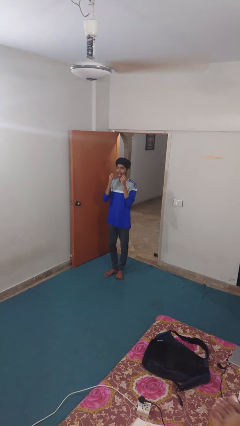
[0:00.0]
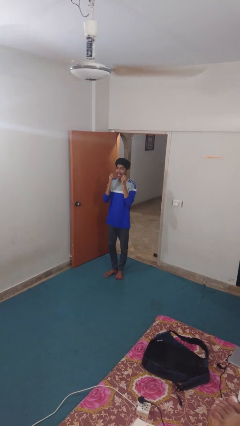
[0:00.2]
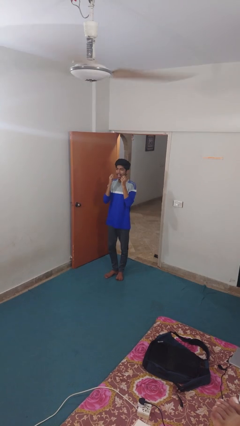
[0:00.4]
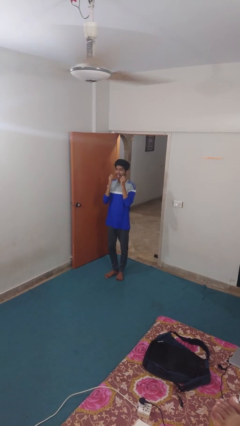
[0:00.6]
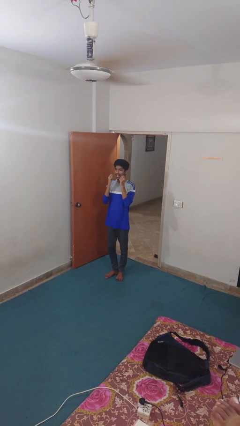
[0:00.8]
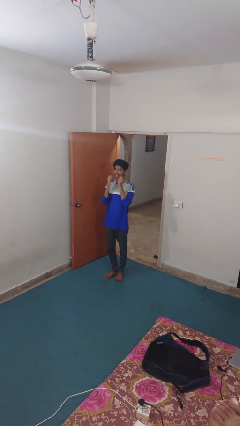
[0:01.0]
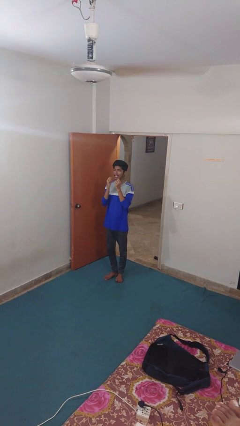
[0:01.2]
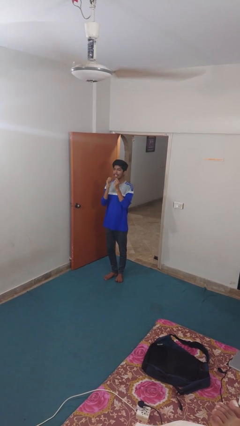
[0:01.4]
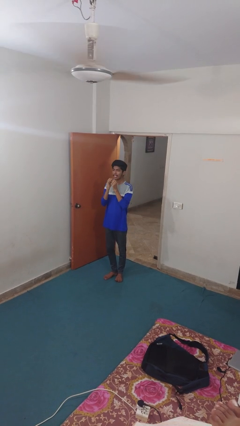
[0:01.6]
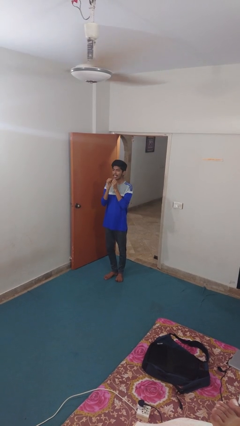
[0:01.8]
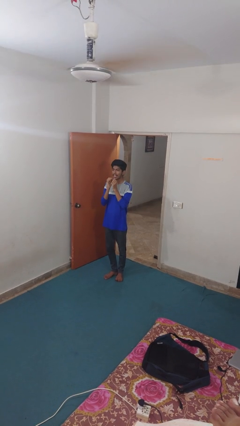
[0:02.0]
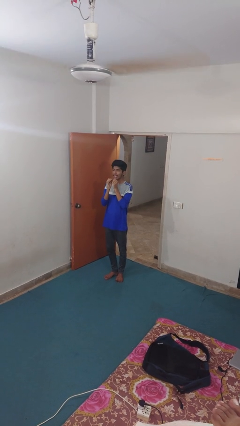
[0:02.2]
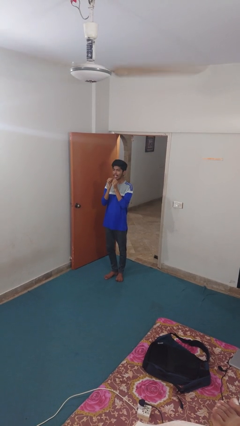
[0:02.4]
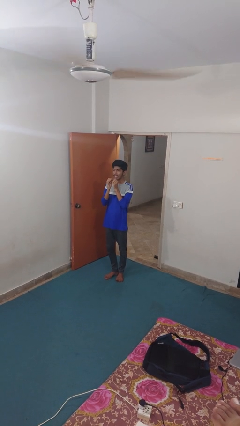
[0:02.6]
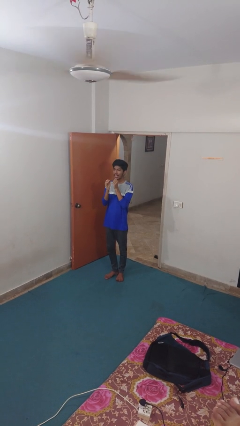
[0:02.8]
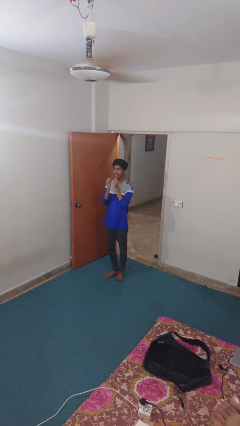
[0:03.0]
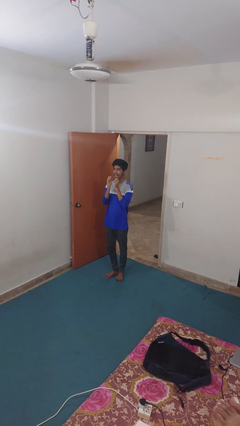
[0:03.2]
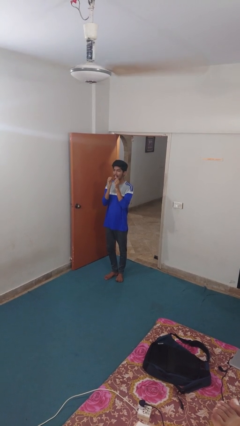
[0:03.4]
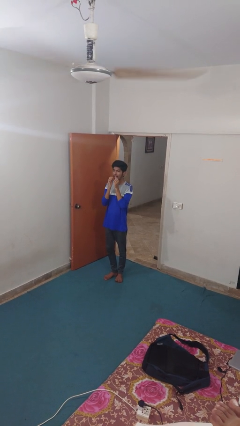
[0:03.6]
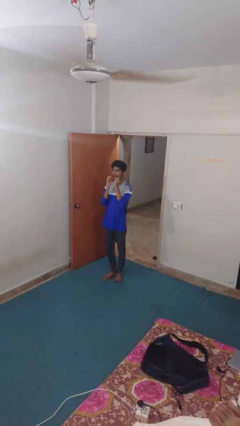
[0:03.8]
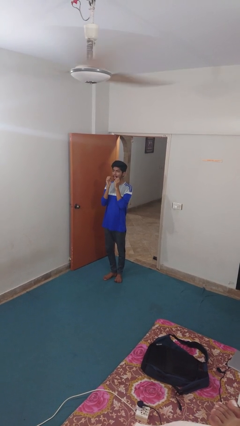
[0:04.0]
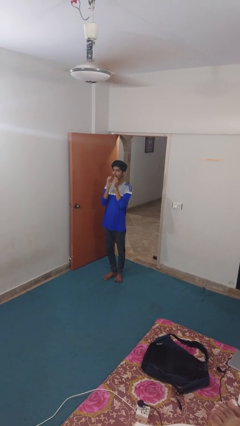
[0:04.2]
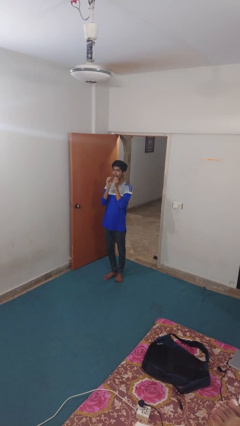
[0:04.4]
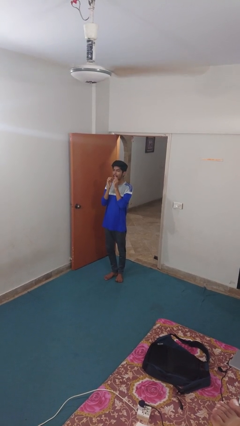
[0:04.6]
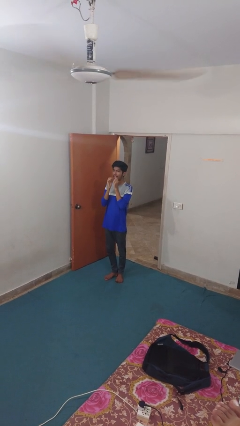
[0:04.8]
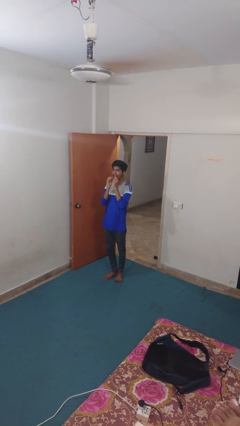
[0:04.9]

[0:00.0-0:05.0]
person flosses

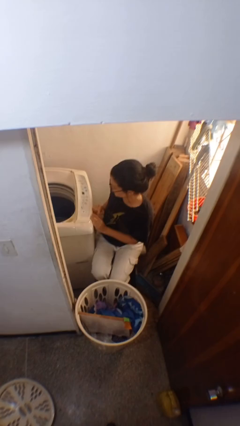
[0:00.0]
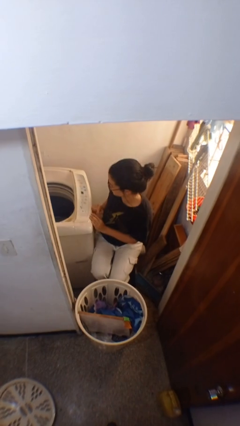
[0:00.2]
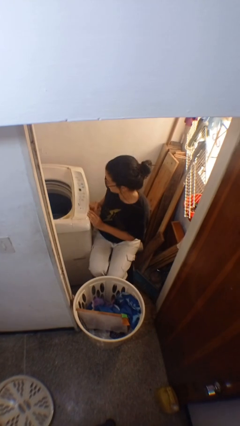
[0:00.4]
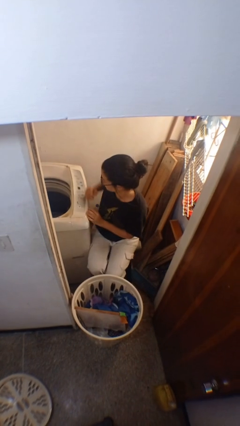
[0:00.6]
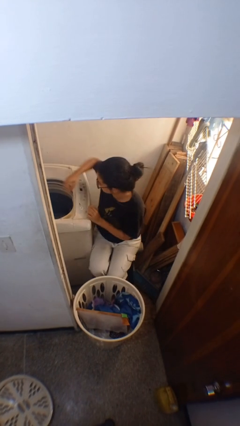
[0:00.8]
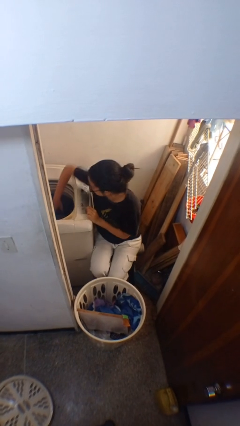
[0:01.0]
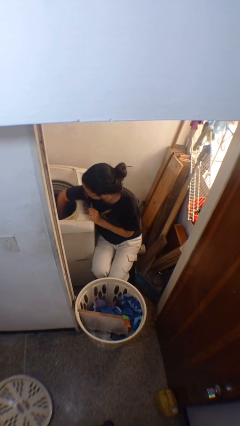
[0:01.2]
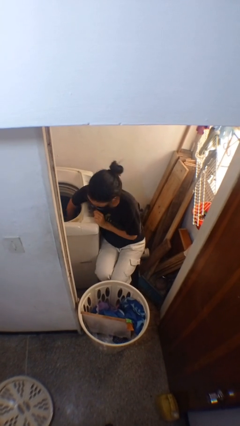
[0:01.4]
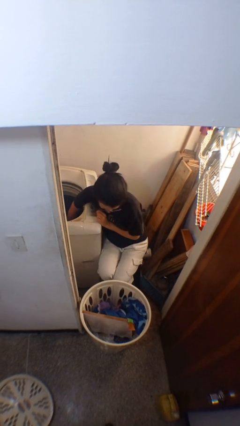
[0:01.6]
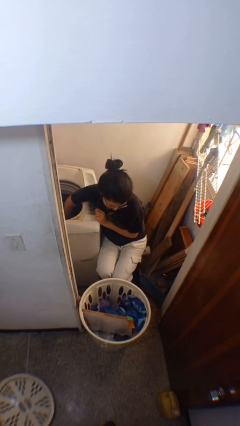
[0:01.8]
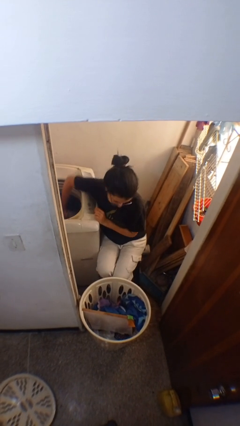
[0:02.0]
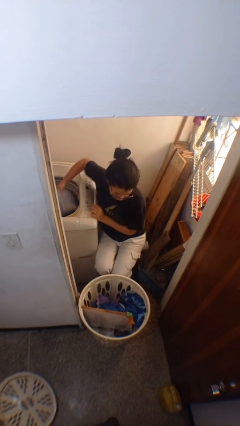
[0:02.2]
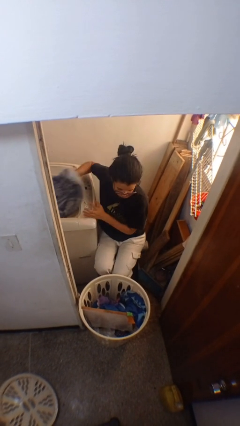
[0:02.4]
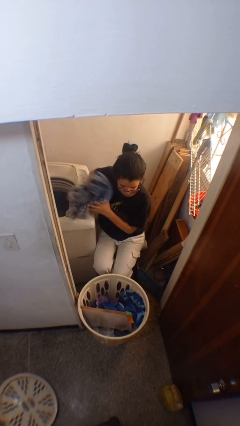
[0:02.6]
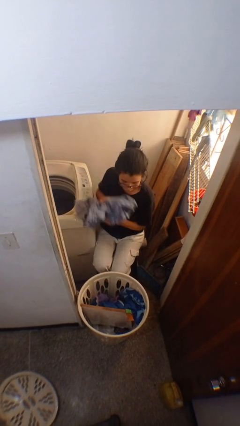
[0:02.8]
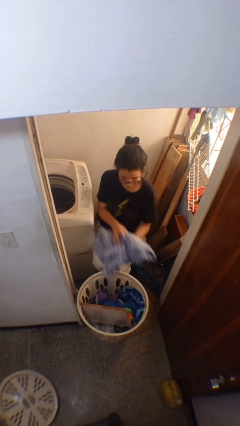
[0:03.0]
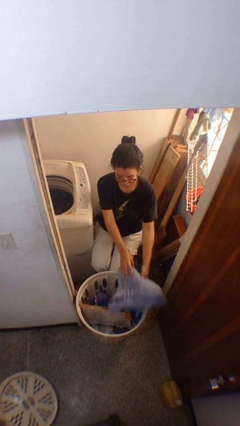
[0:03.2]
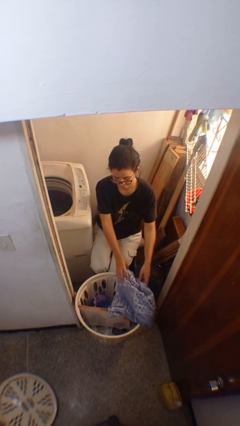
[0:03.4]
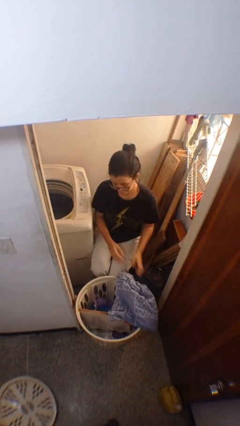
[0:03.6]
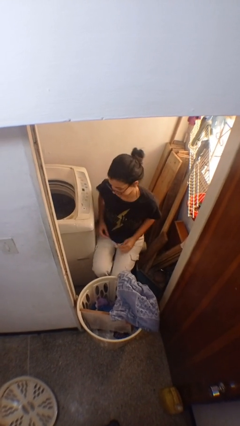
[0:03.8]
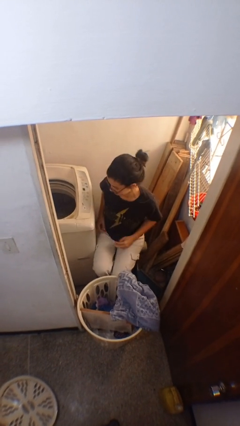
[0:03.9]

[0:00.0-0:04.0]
person unloads clotheswasher

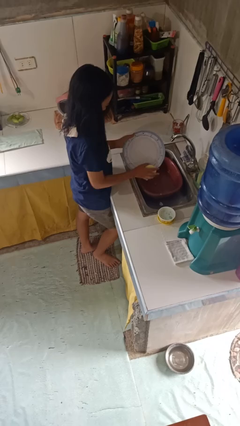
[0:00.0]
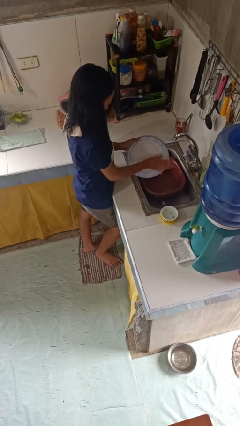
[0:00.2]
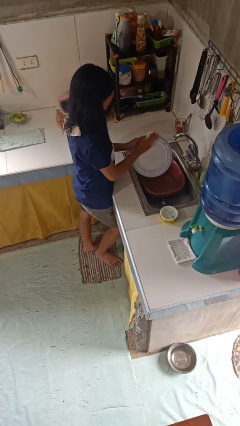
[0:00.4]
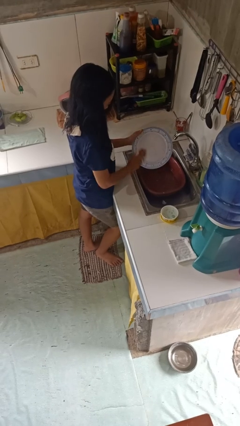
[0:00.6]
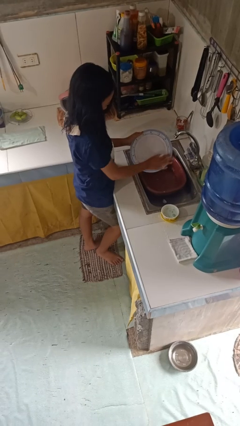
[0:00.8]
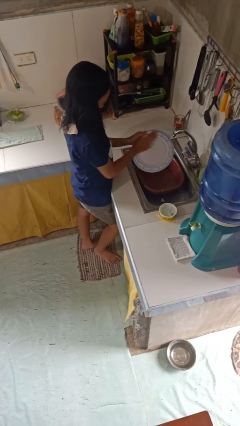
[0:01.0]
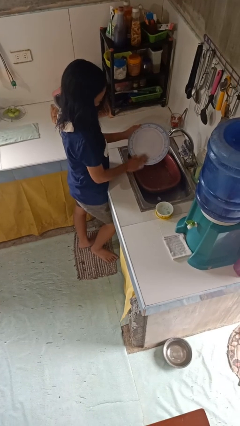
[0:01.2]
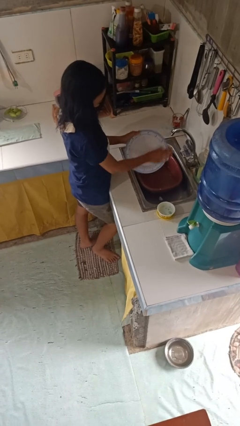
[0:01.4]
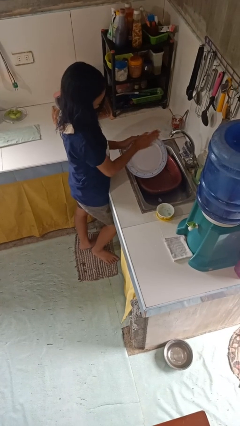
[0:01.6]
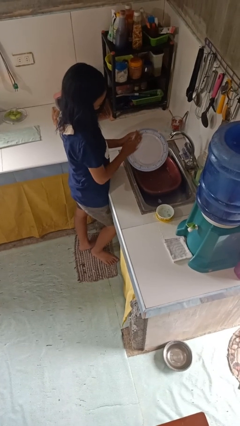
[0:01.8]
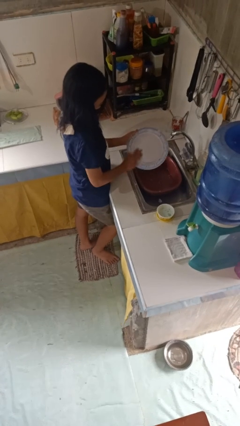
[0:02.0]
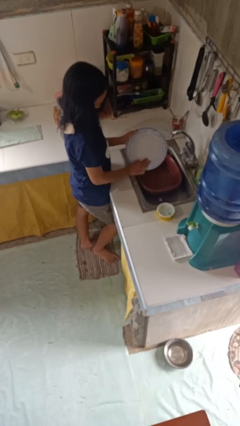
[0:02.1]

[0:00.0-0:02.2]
person washes dish

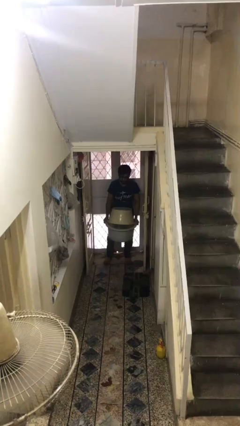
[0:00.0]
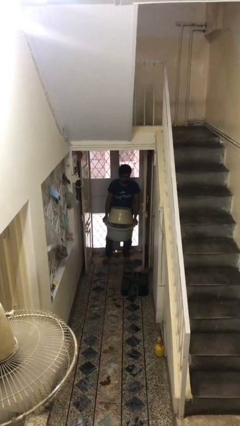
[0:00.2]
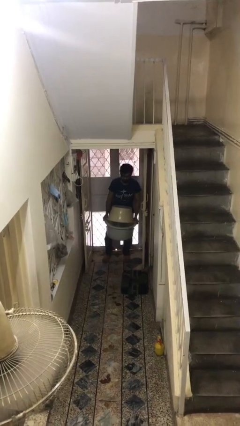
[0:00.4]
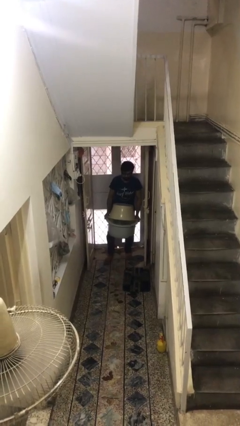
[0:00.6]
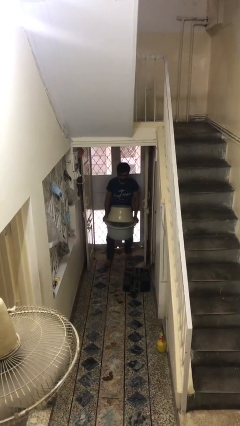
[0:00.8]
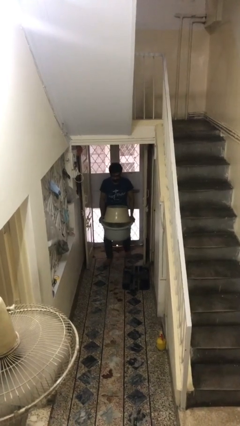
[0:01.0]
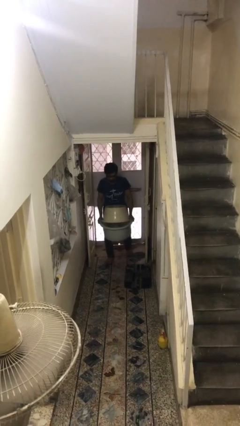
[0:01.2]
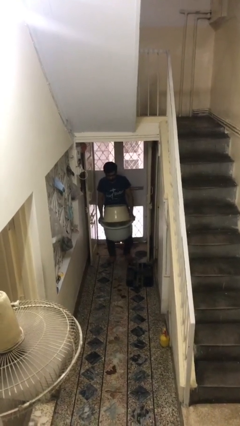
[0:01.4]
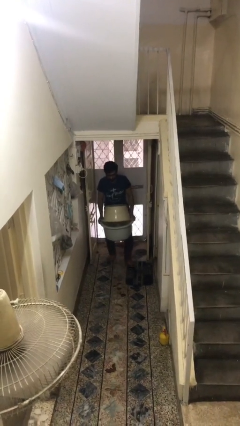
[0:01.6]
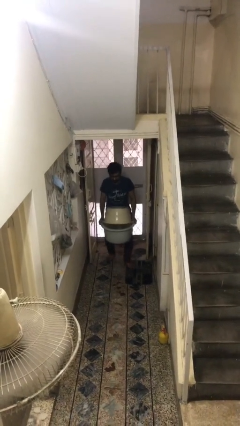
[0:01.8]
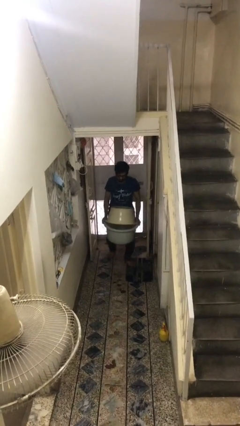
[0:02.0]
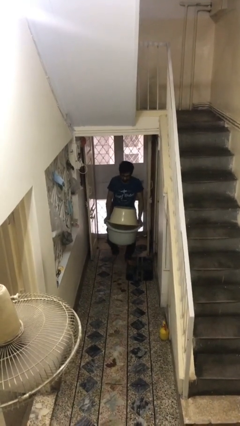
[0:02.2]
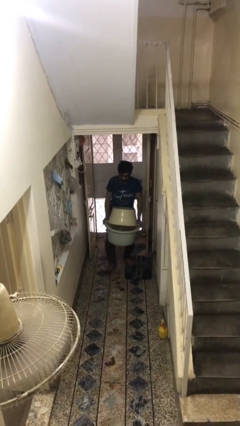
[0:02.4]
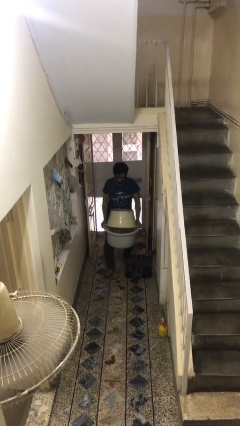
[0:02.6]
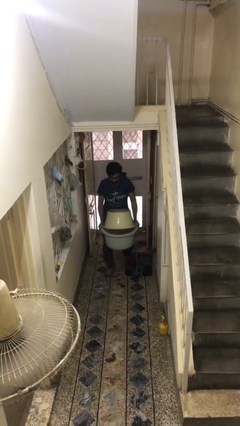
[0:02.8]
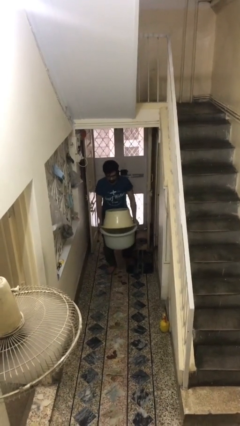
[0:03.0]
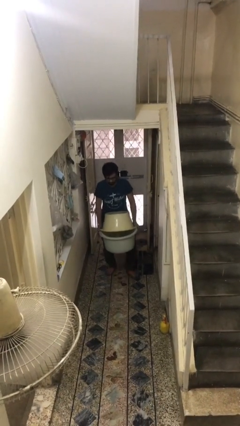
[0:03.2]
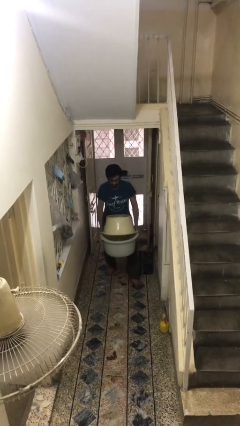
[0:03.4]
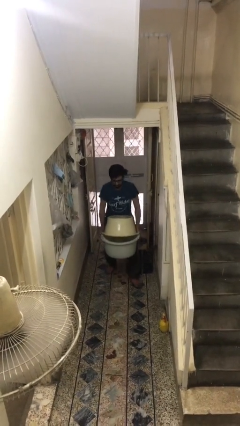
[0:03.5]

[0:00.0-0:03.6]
person carries heavy object

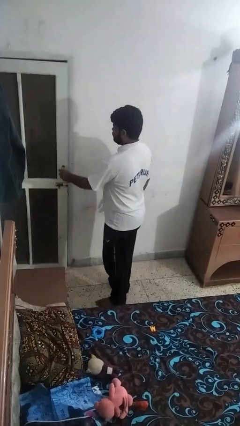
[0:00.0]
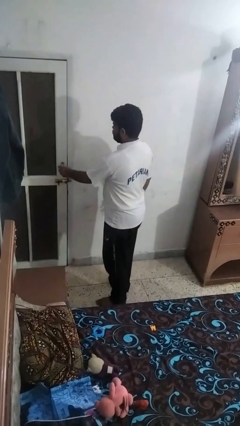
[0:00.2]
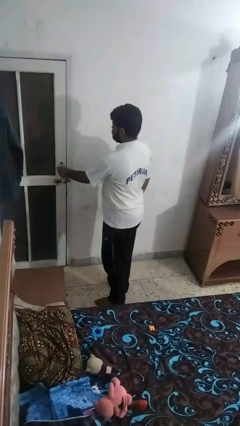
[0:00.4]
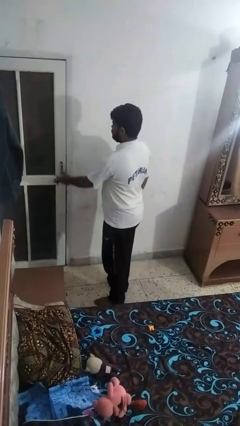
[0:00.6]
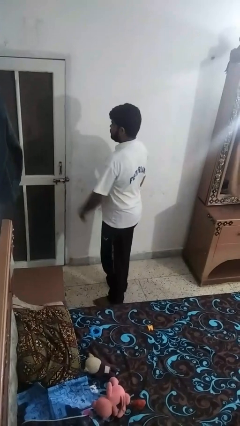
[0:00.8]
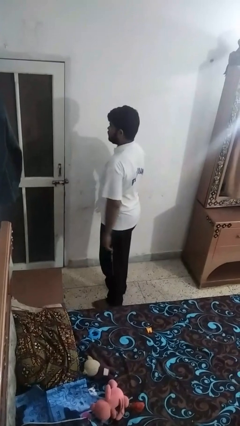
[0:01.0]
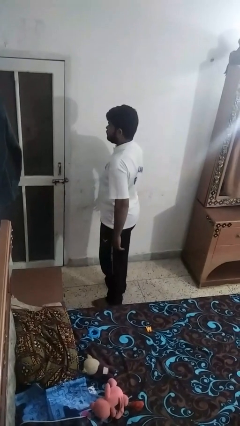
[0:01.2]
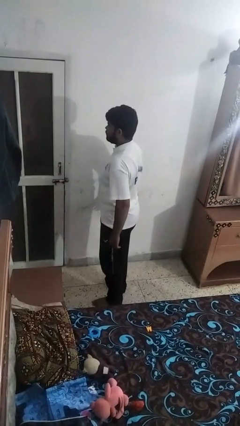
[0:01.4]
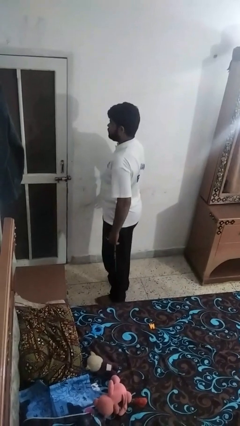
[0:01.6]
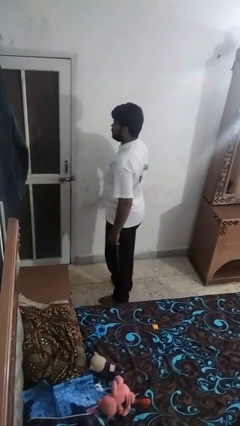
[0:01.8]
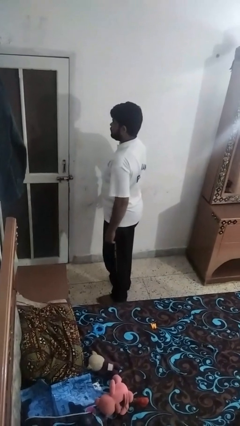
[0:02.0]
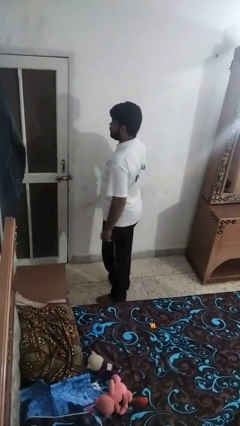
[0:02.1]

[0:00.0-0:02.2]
person closes gate

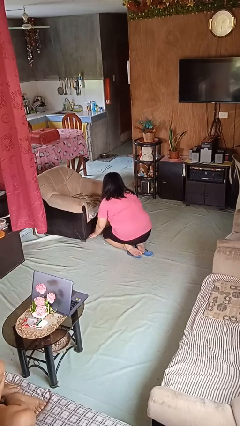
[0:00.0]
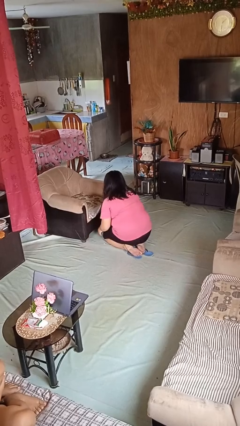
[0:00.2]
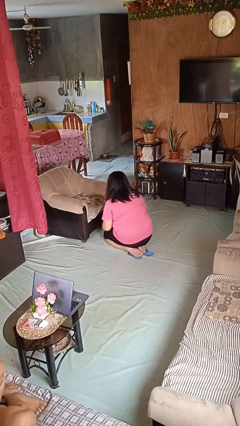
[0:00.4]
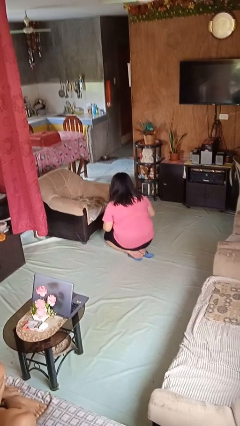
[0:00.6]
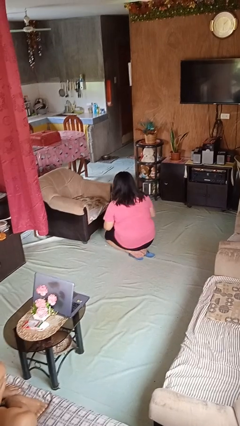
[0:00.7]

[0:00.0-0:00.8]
person searches under couch
